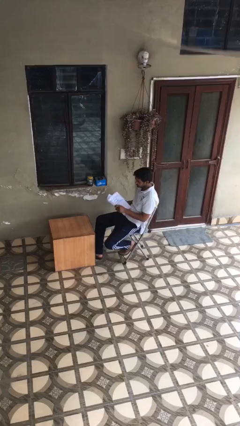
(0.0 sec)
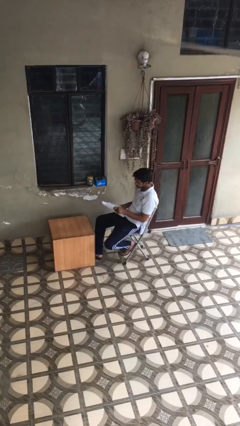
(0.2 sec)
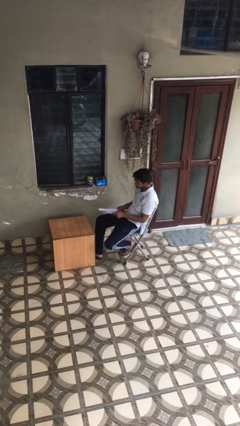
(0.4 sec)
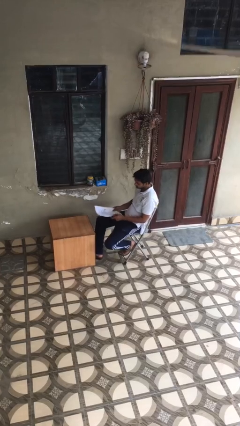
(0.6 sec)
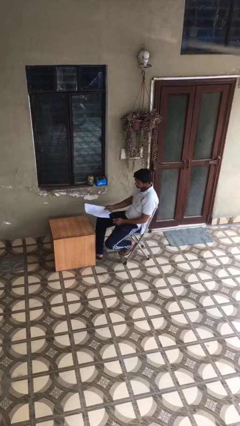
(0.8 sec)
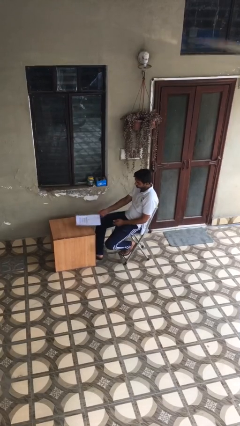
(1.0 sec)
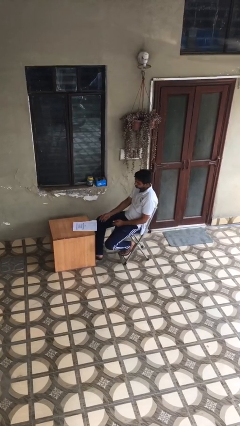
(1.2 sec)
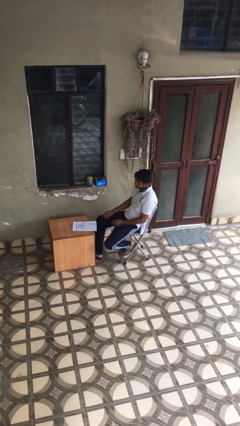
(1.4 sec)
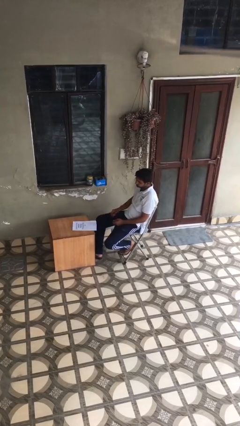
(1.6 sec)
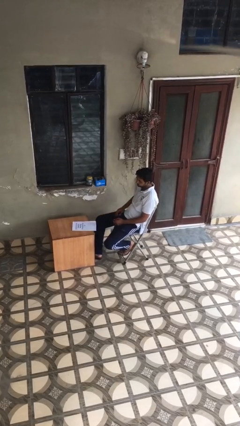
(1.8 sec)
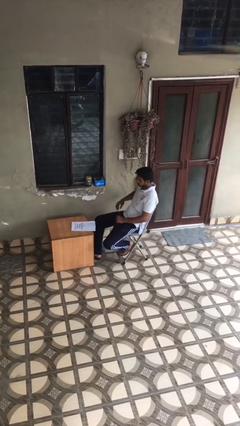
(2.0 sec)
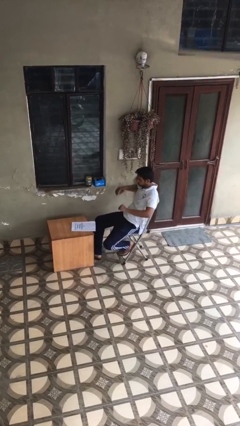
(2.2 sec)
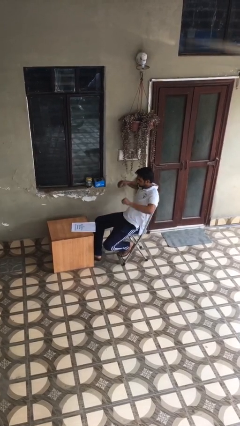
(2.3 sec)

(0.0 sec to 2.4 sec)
person puts down object on table

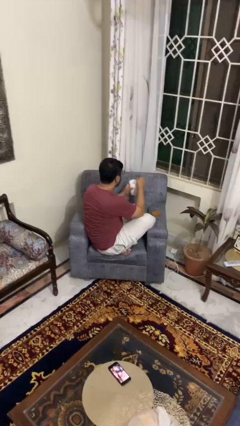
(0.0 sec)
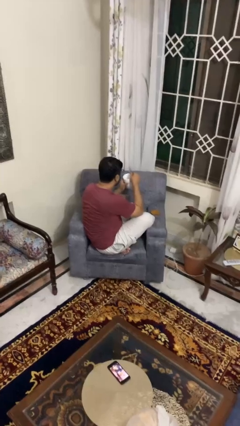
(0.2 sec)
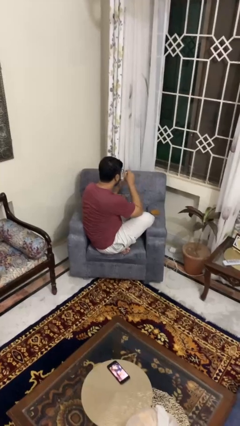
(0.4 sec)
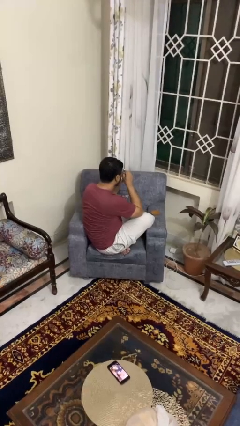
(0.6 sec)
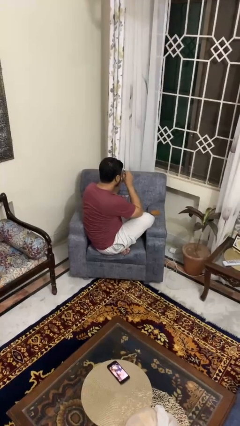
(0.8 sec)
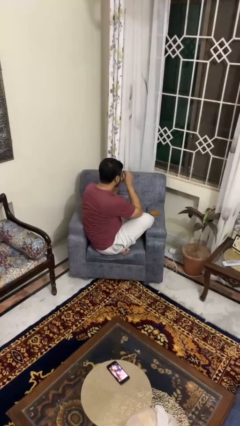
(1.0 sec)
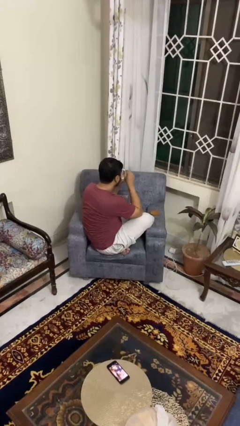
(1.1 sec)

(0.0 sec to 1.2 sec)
person drinks from mug

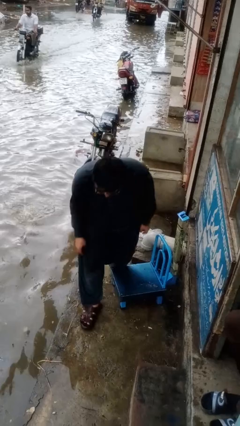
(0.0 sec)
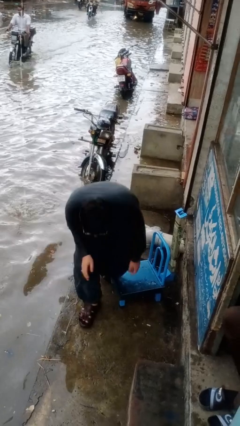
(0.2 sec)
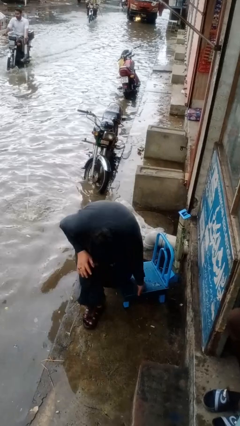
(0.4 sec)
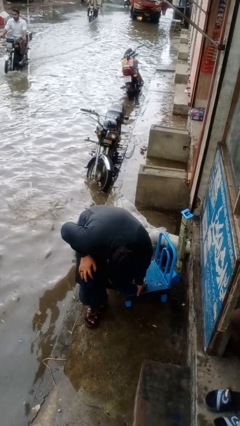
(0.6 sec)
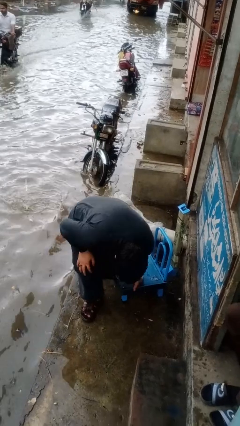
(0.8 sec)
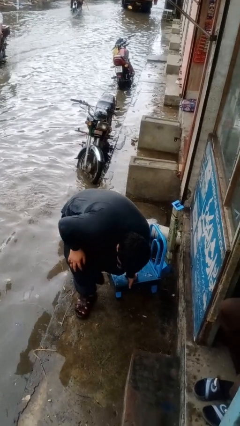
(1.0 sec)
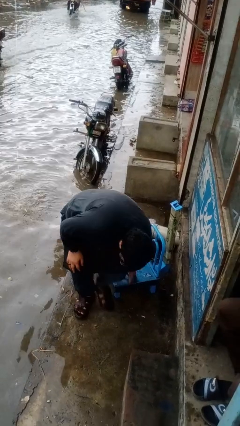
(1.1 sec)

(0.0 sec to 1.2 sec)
person stands up from floor

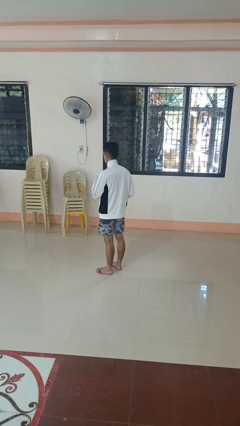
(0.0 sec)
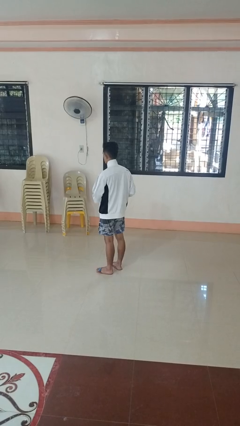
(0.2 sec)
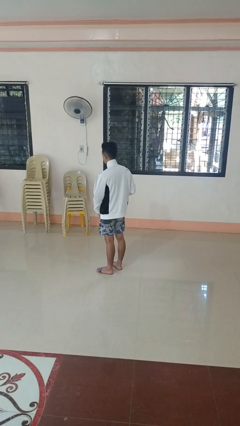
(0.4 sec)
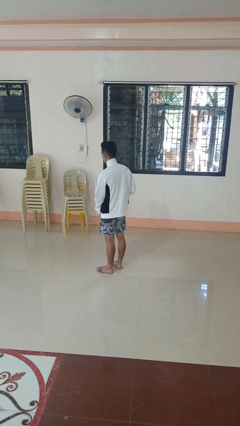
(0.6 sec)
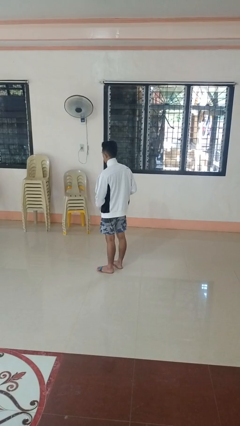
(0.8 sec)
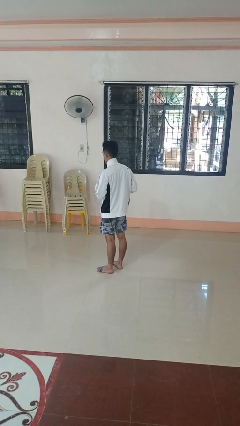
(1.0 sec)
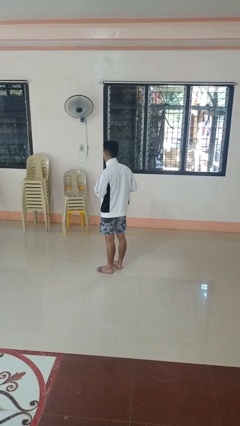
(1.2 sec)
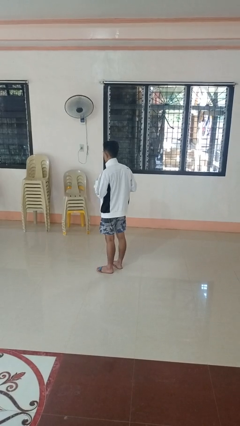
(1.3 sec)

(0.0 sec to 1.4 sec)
person unzips jacket

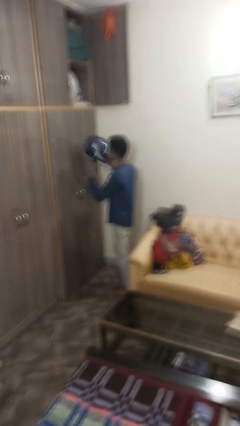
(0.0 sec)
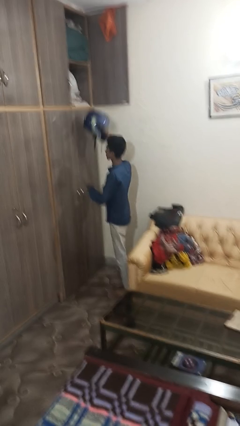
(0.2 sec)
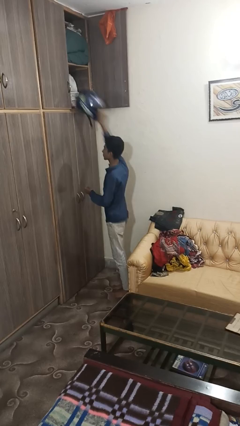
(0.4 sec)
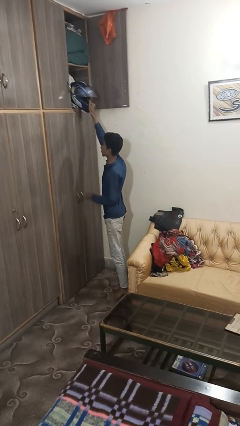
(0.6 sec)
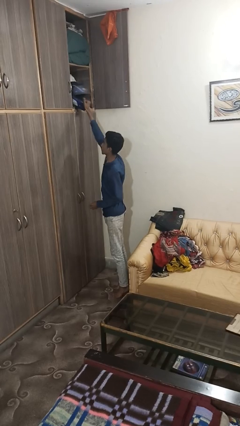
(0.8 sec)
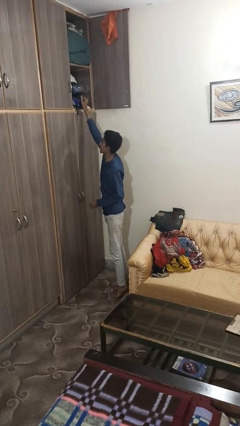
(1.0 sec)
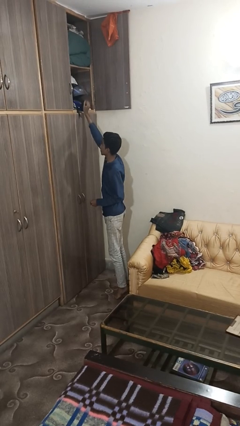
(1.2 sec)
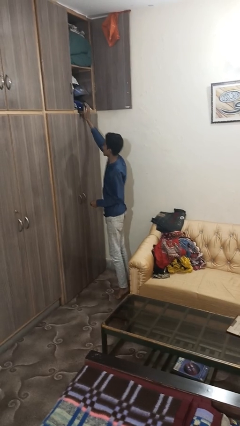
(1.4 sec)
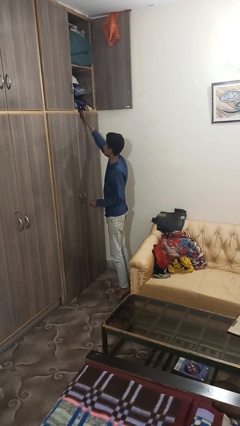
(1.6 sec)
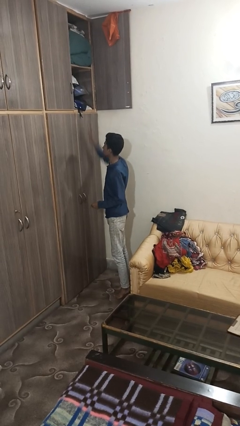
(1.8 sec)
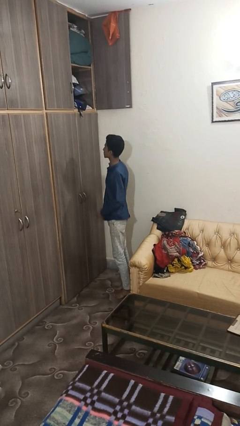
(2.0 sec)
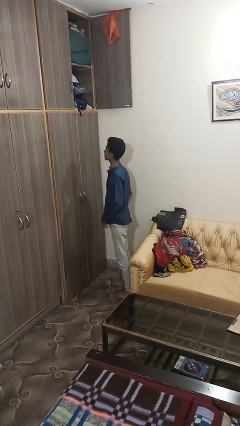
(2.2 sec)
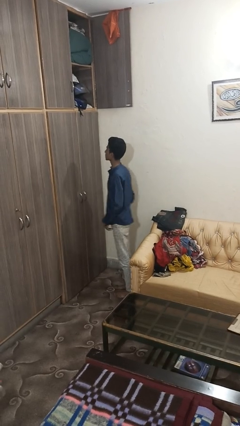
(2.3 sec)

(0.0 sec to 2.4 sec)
person puts down object on shelf

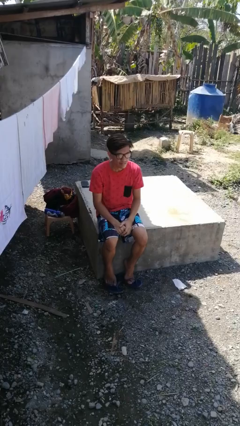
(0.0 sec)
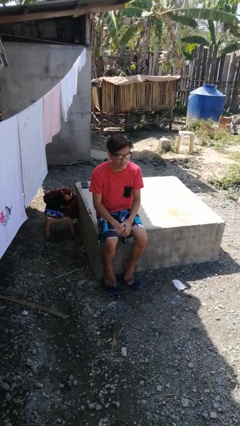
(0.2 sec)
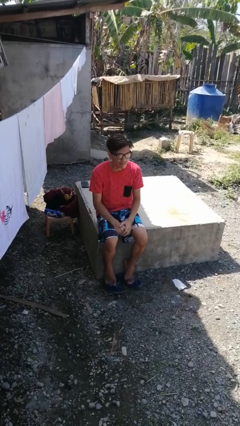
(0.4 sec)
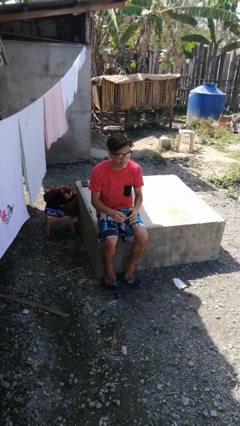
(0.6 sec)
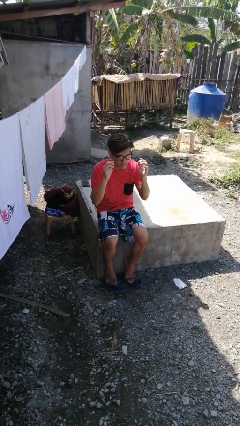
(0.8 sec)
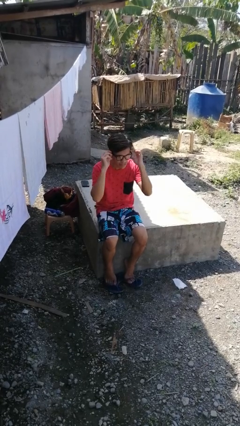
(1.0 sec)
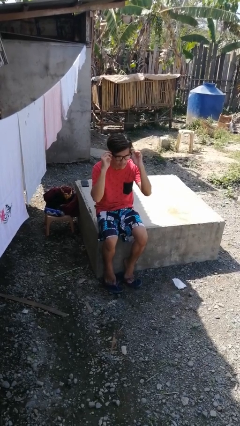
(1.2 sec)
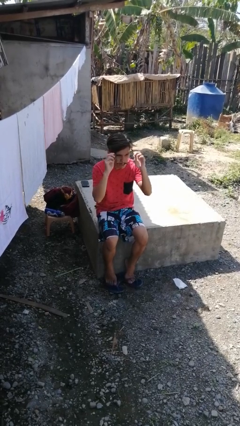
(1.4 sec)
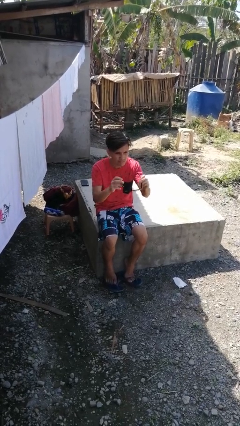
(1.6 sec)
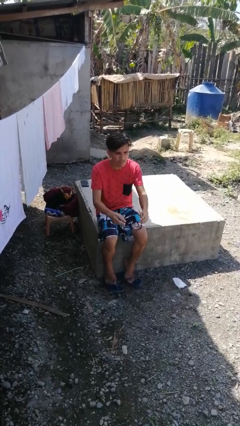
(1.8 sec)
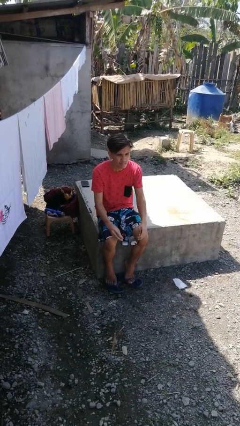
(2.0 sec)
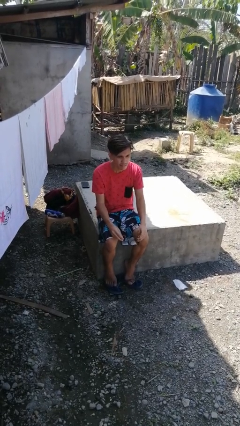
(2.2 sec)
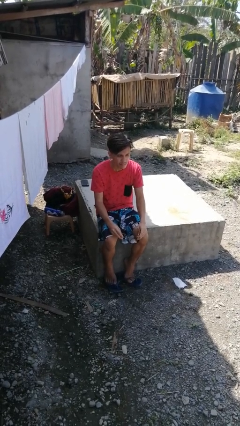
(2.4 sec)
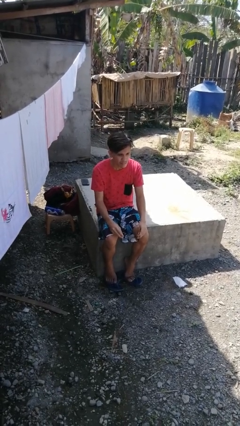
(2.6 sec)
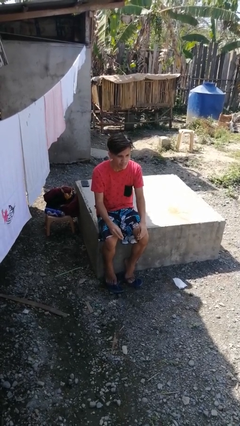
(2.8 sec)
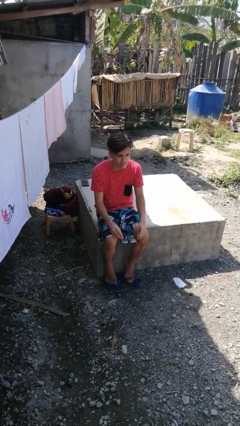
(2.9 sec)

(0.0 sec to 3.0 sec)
person takes off glasses

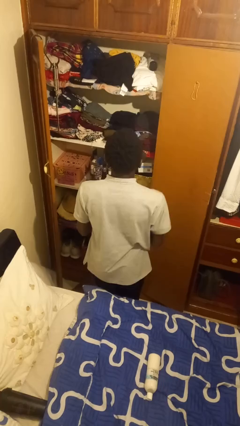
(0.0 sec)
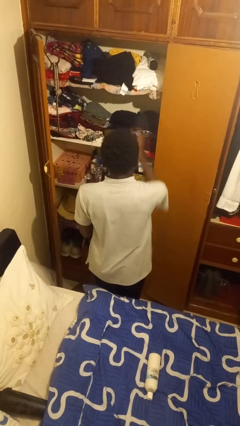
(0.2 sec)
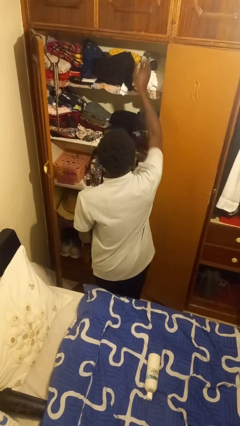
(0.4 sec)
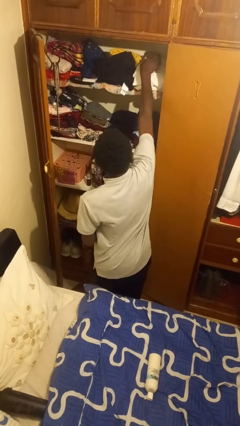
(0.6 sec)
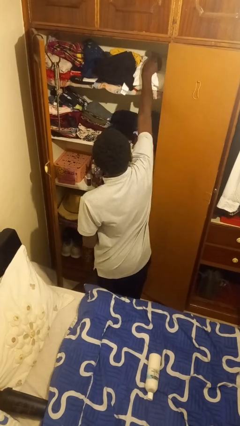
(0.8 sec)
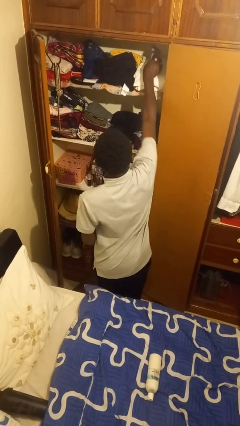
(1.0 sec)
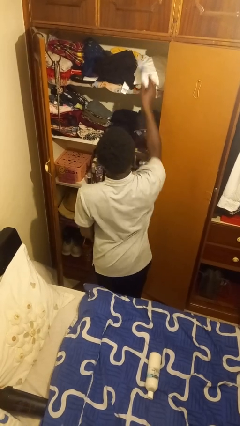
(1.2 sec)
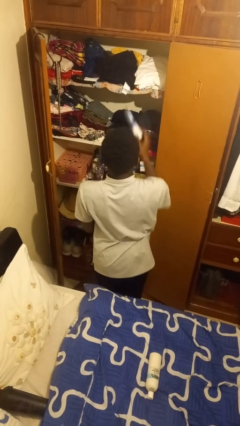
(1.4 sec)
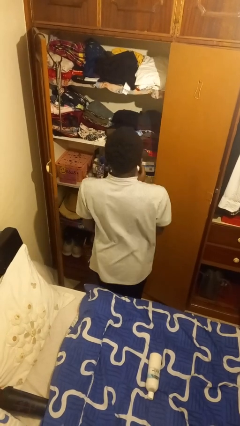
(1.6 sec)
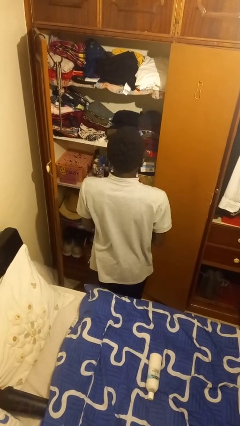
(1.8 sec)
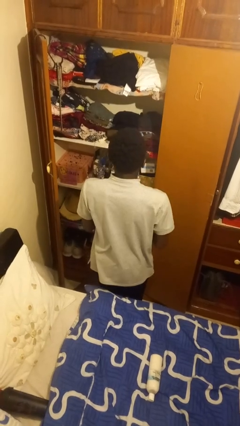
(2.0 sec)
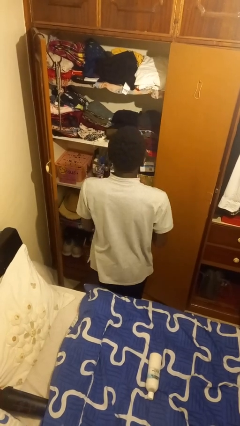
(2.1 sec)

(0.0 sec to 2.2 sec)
person picks up object from shelf

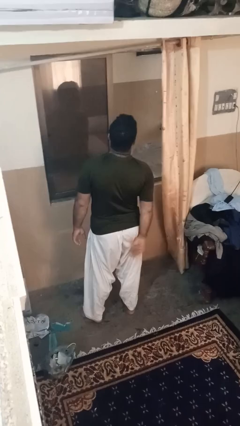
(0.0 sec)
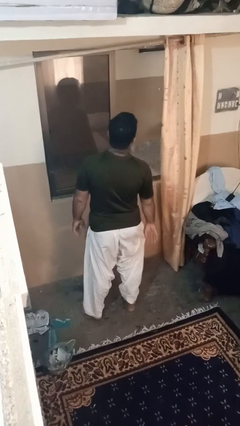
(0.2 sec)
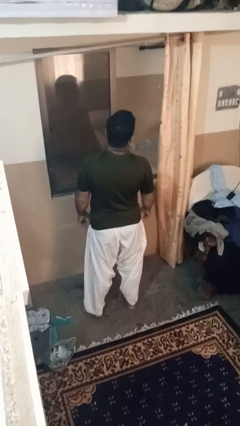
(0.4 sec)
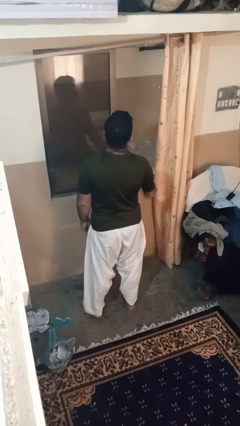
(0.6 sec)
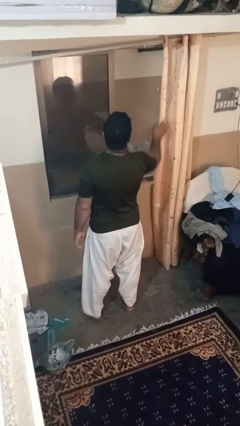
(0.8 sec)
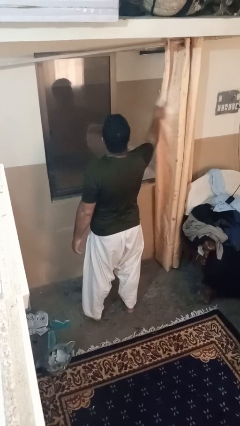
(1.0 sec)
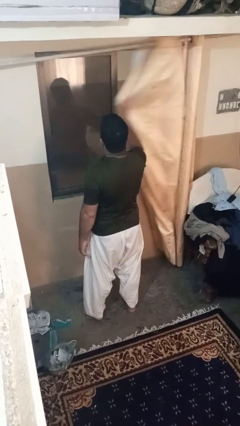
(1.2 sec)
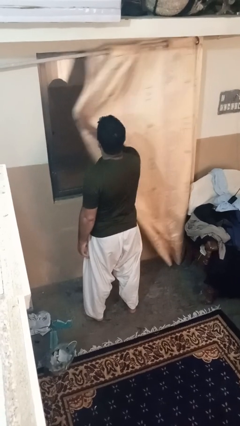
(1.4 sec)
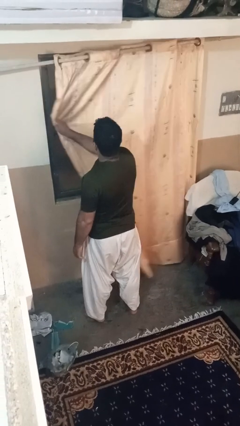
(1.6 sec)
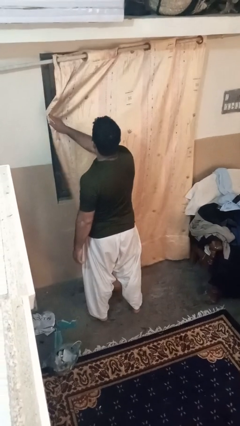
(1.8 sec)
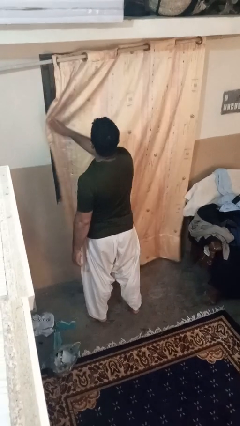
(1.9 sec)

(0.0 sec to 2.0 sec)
person closes curtains

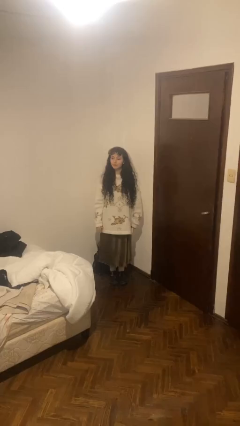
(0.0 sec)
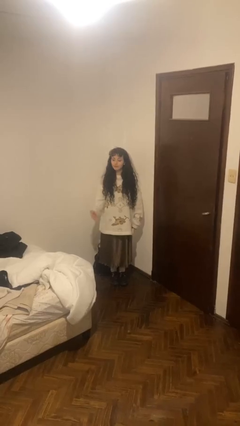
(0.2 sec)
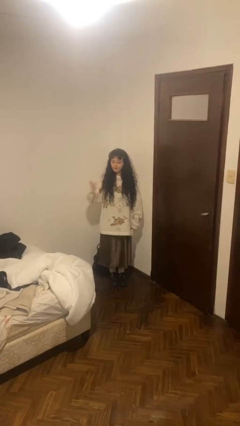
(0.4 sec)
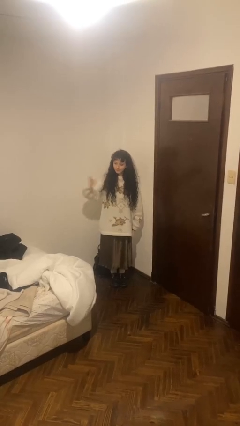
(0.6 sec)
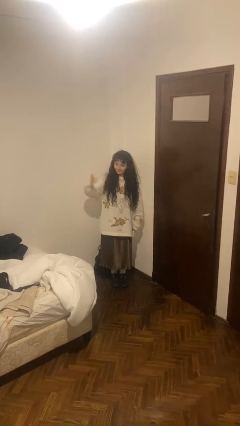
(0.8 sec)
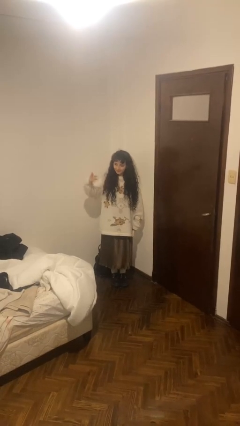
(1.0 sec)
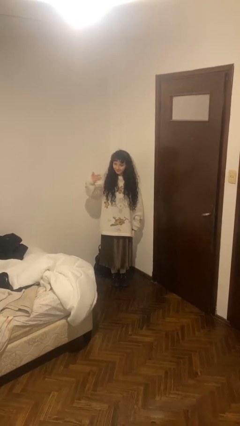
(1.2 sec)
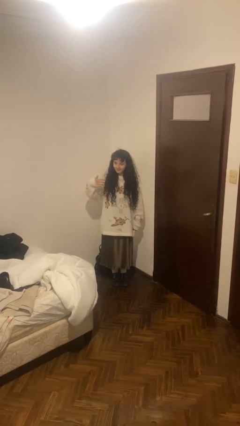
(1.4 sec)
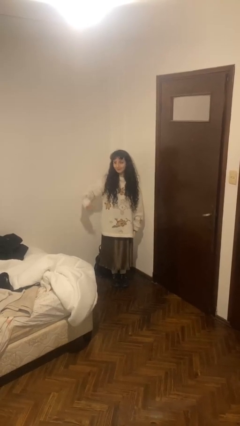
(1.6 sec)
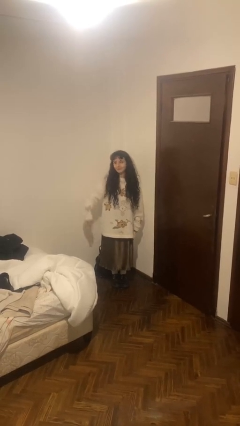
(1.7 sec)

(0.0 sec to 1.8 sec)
person gestures come here